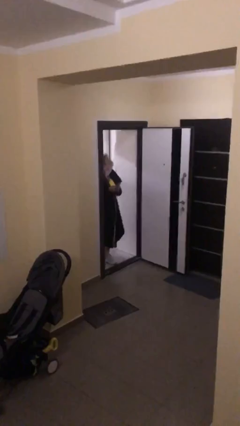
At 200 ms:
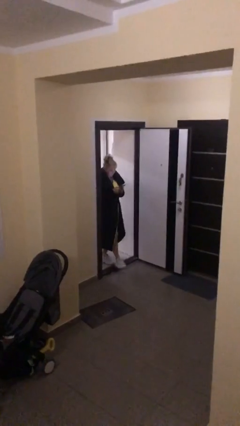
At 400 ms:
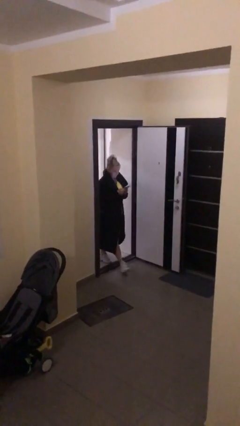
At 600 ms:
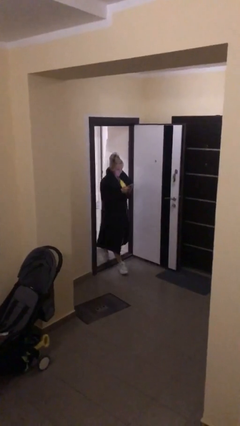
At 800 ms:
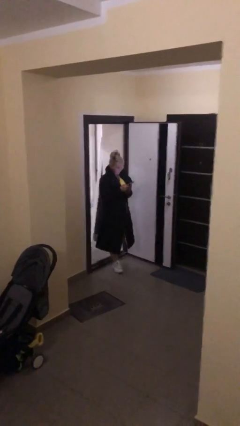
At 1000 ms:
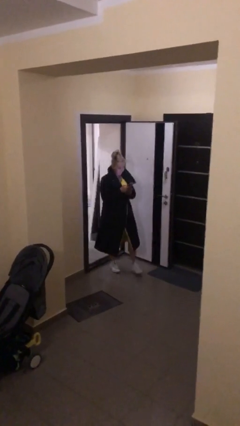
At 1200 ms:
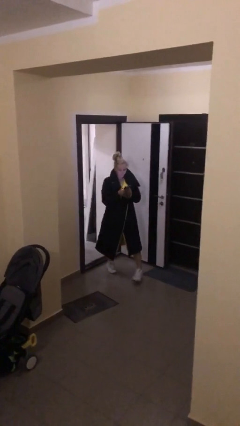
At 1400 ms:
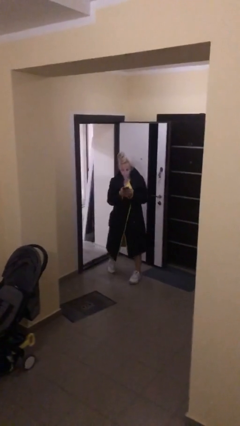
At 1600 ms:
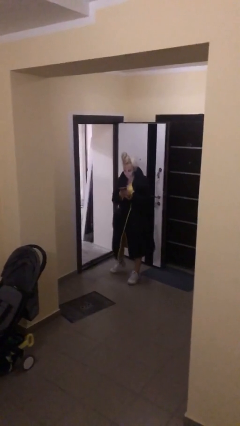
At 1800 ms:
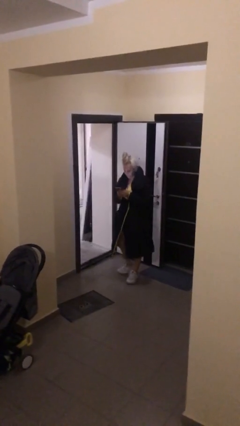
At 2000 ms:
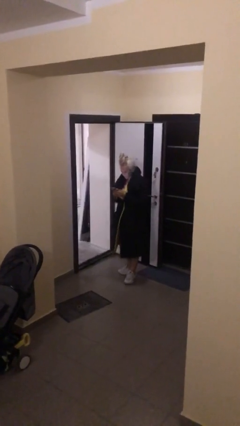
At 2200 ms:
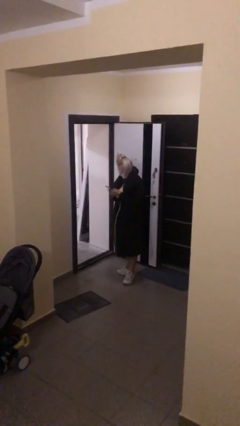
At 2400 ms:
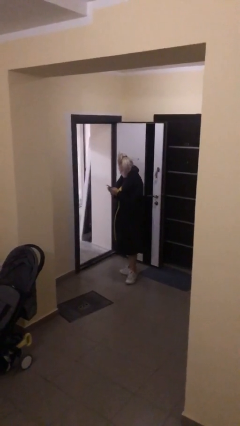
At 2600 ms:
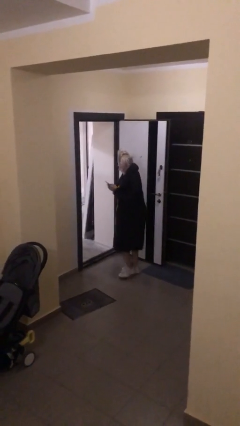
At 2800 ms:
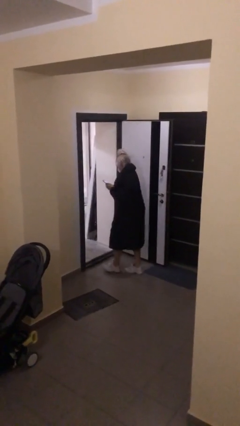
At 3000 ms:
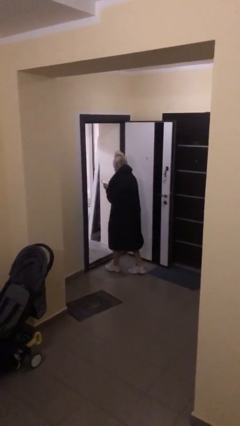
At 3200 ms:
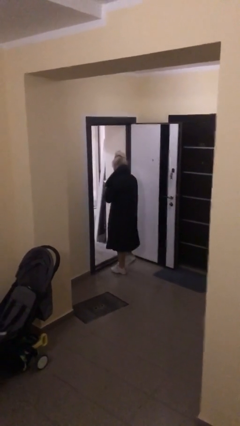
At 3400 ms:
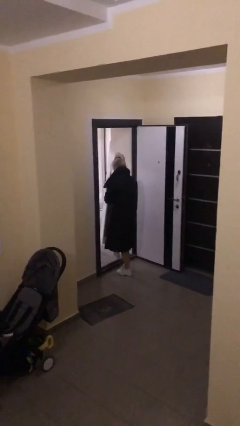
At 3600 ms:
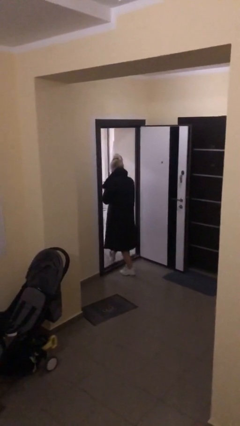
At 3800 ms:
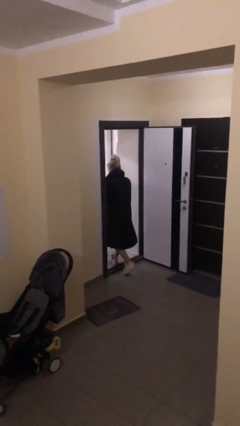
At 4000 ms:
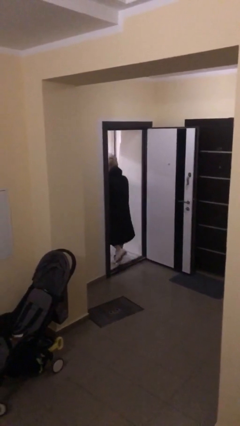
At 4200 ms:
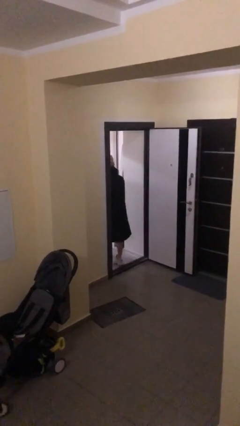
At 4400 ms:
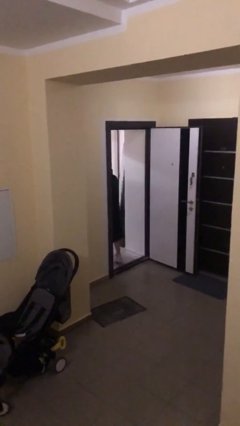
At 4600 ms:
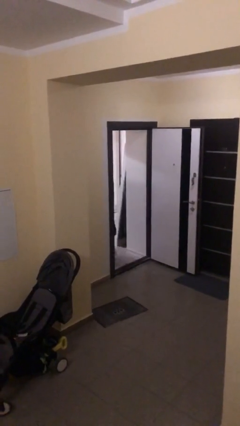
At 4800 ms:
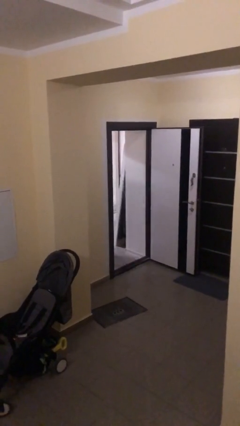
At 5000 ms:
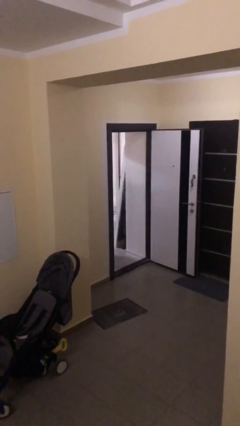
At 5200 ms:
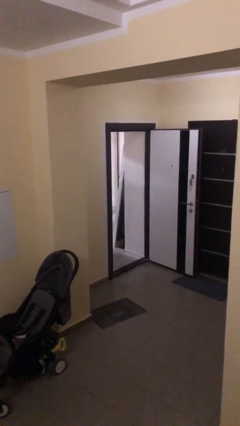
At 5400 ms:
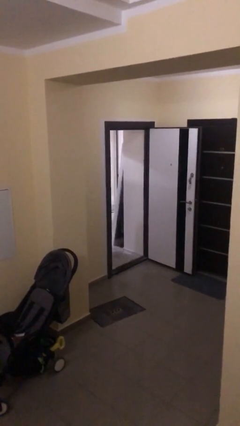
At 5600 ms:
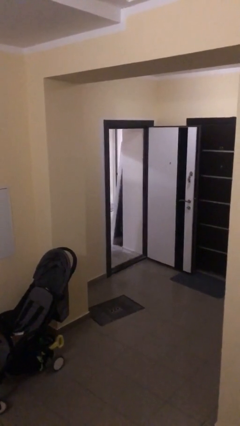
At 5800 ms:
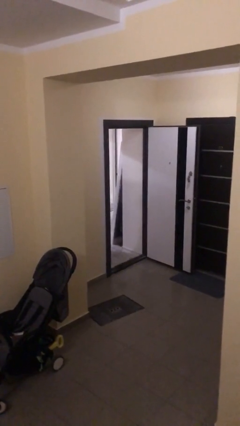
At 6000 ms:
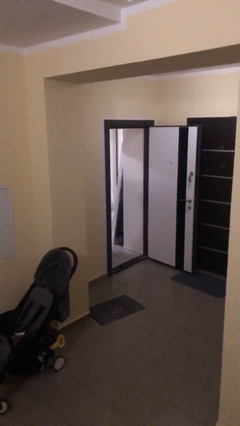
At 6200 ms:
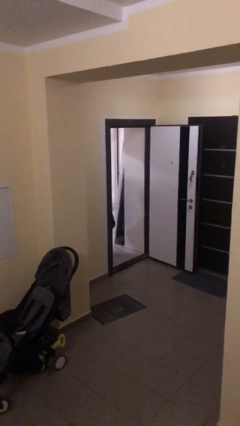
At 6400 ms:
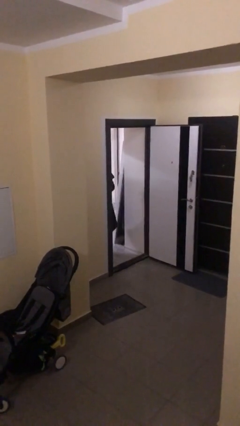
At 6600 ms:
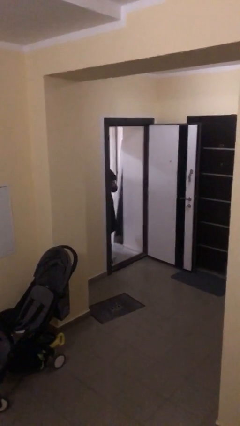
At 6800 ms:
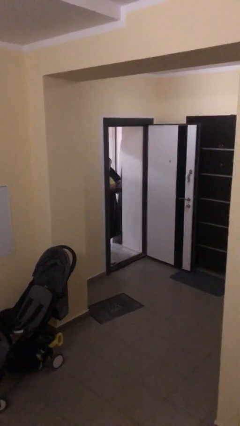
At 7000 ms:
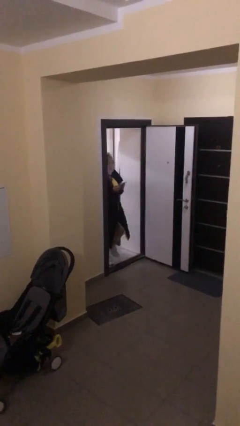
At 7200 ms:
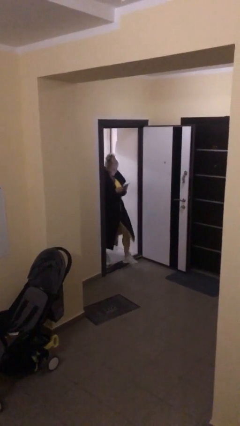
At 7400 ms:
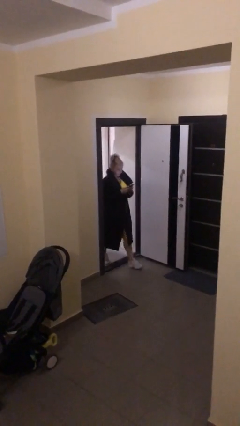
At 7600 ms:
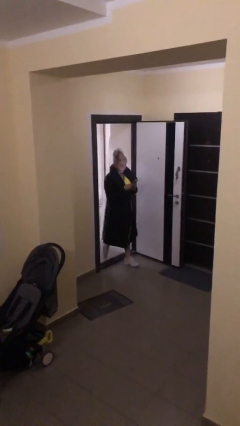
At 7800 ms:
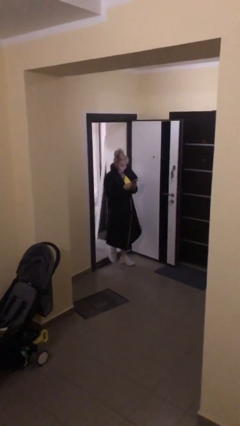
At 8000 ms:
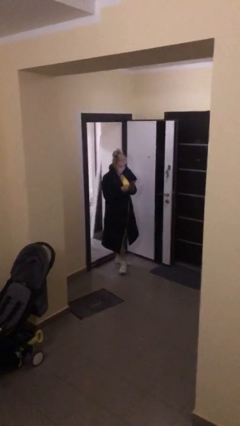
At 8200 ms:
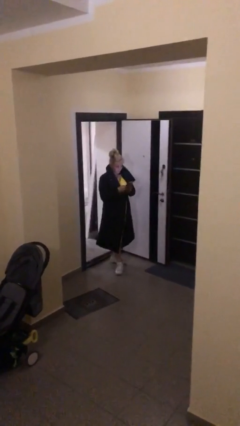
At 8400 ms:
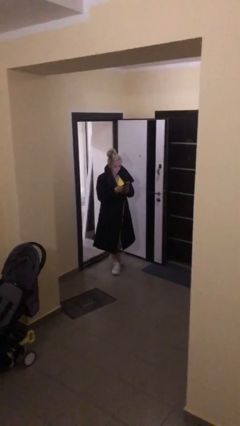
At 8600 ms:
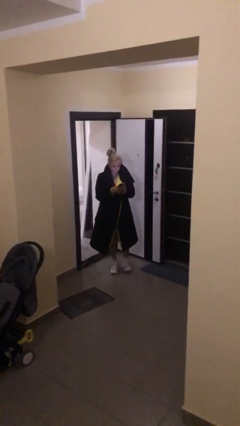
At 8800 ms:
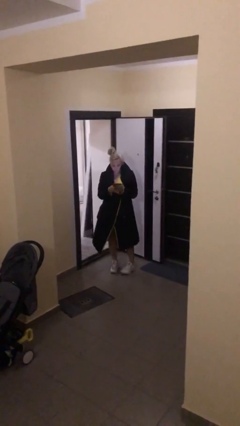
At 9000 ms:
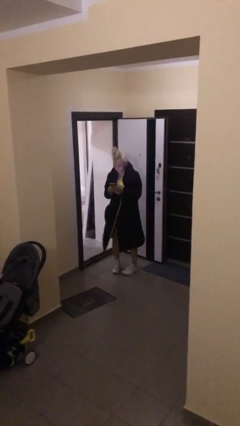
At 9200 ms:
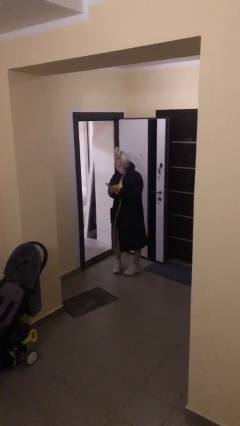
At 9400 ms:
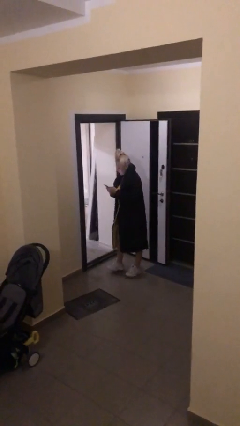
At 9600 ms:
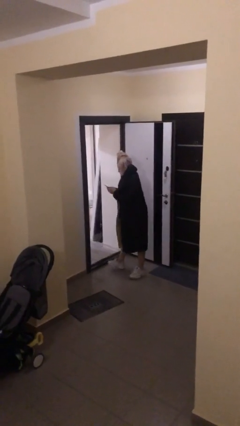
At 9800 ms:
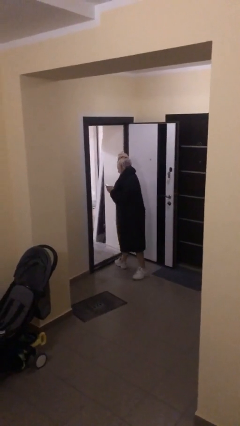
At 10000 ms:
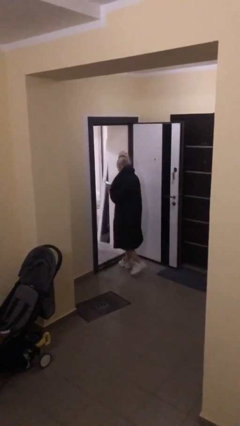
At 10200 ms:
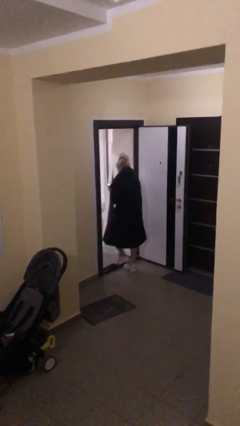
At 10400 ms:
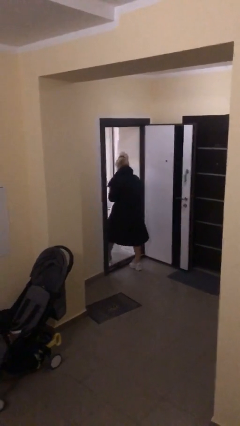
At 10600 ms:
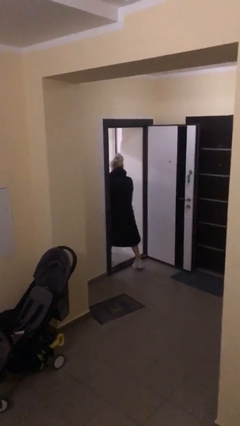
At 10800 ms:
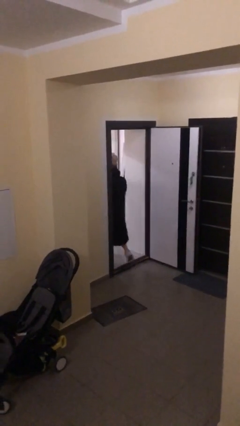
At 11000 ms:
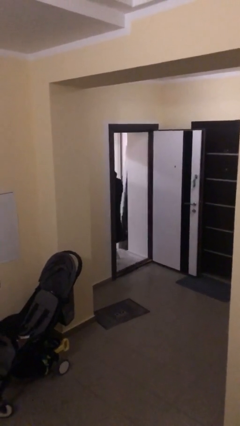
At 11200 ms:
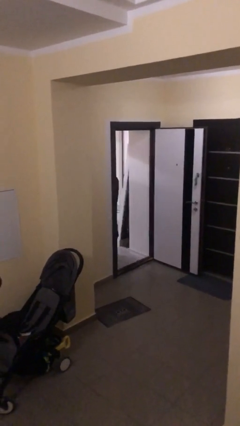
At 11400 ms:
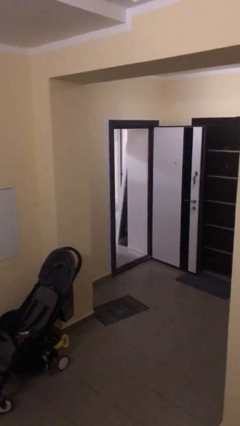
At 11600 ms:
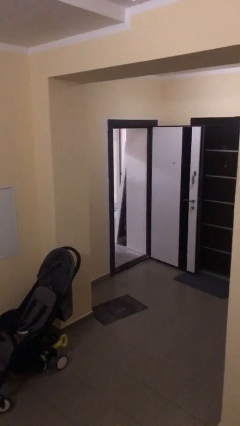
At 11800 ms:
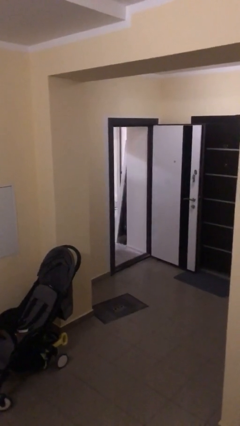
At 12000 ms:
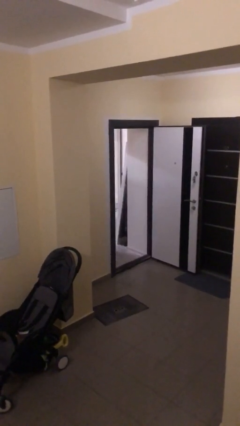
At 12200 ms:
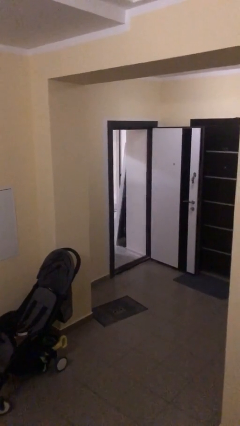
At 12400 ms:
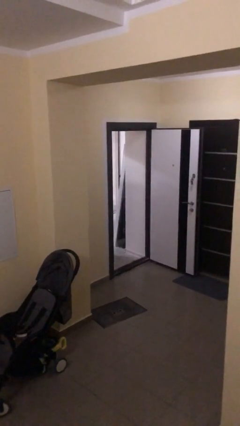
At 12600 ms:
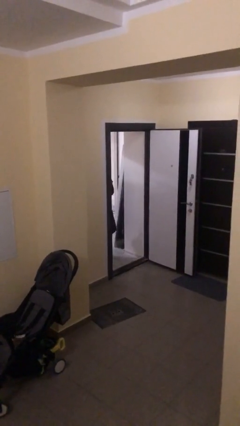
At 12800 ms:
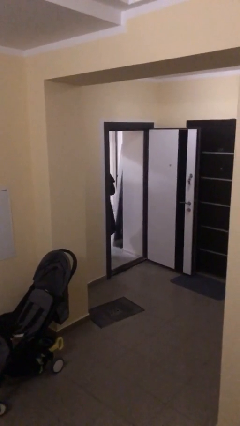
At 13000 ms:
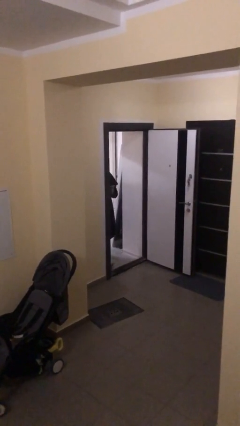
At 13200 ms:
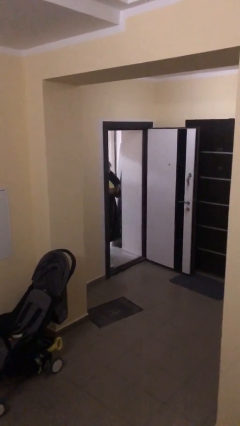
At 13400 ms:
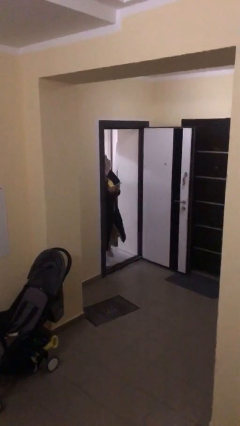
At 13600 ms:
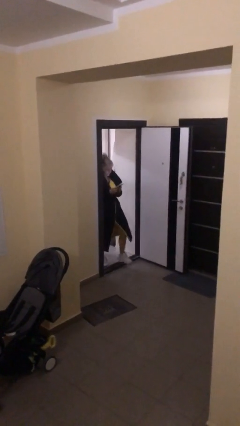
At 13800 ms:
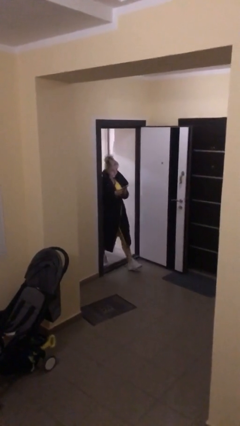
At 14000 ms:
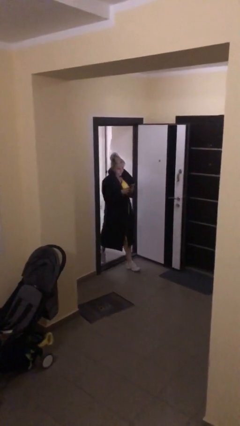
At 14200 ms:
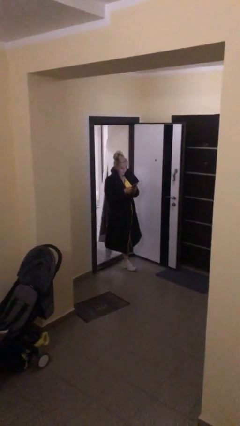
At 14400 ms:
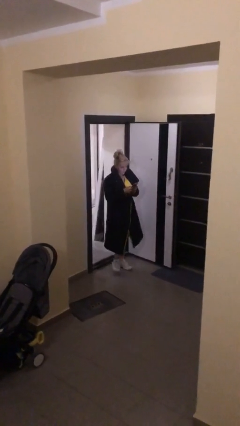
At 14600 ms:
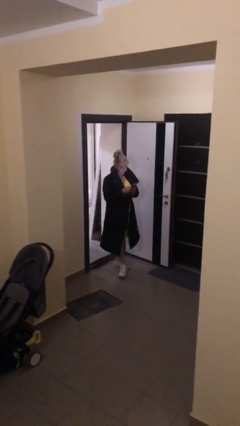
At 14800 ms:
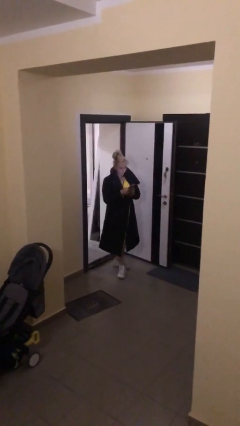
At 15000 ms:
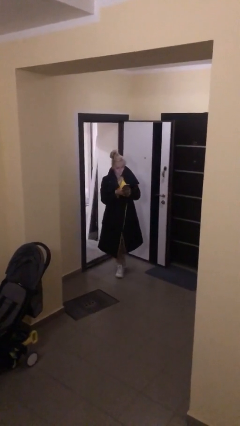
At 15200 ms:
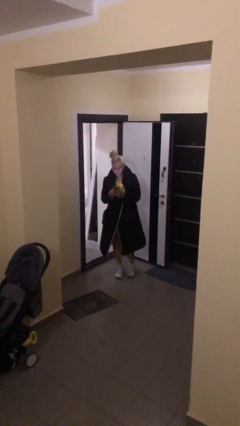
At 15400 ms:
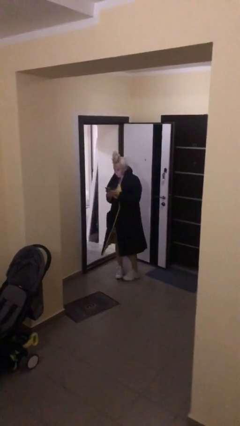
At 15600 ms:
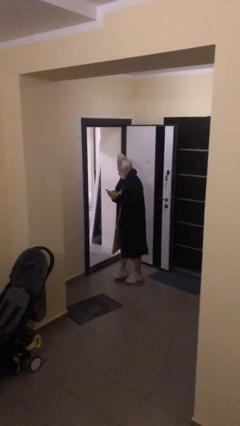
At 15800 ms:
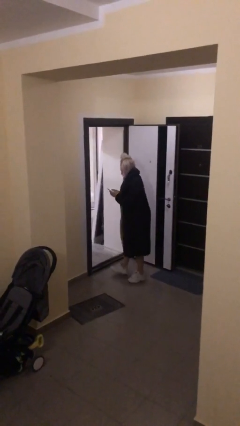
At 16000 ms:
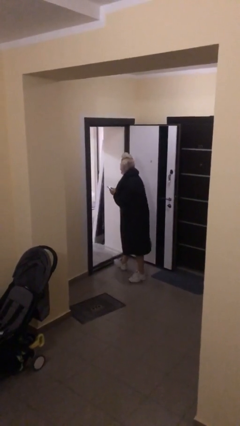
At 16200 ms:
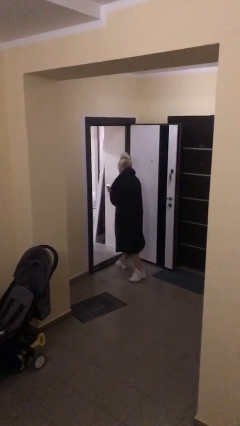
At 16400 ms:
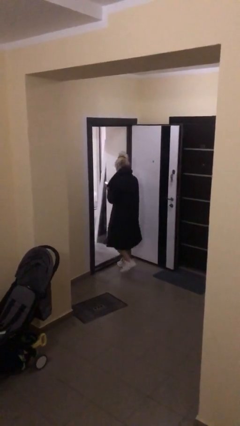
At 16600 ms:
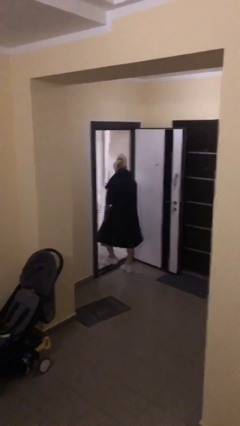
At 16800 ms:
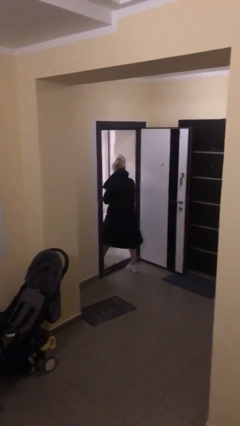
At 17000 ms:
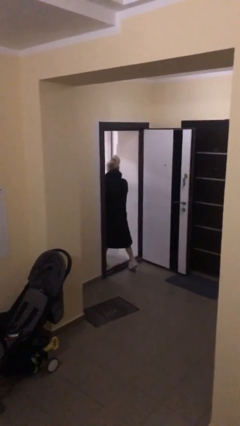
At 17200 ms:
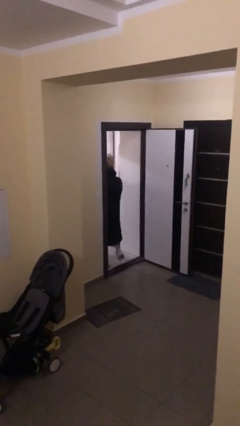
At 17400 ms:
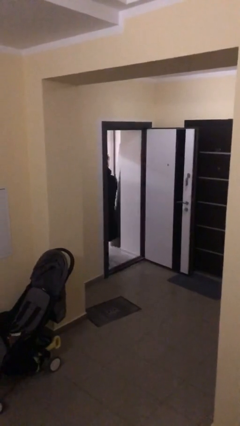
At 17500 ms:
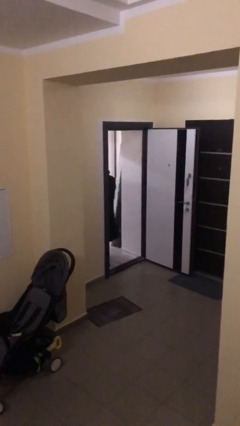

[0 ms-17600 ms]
person texts on phone
